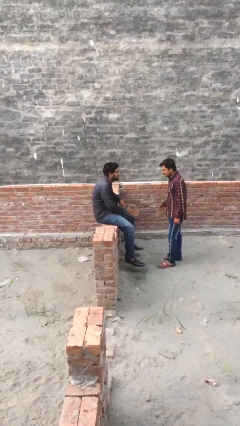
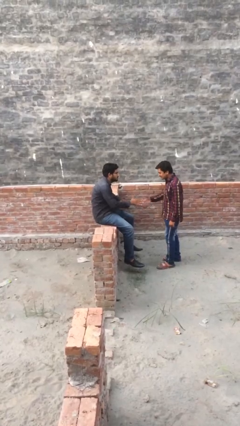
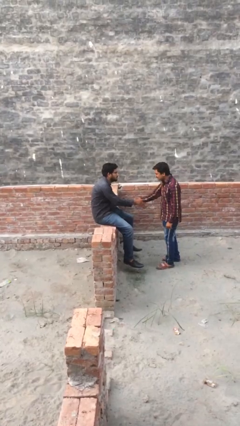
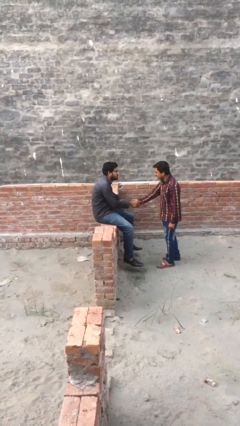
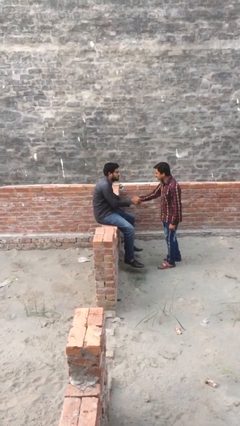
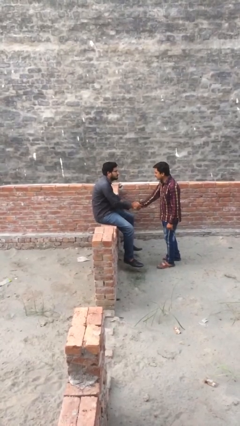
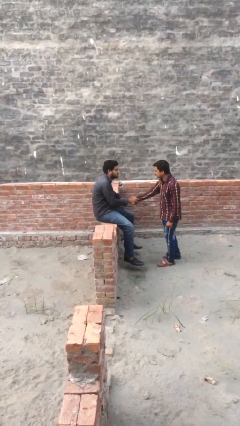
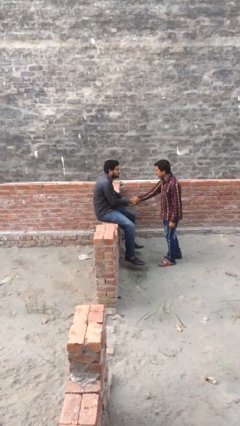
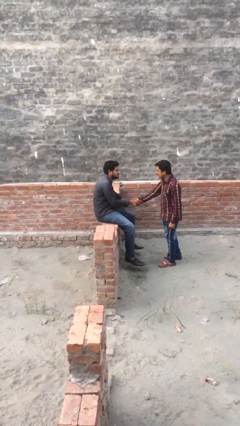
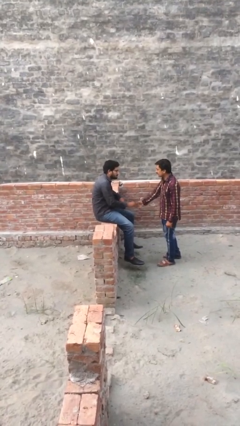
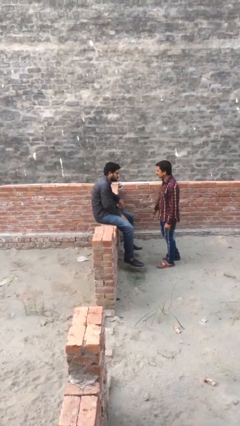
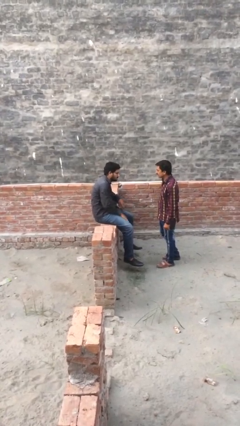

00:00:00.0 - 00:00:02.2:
person shakes hand

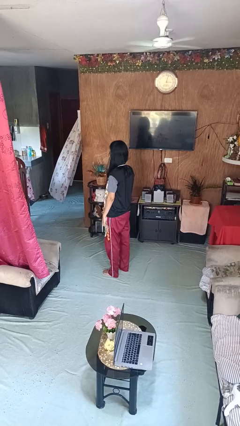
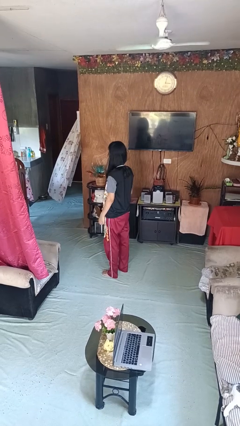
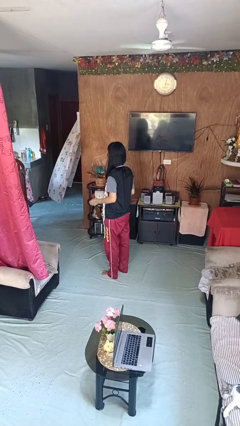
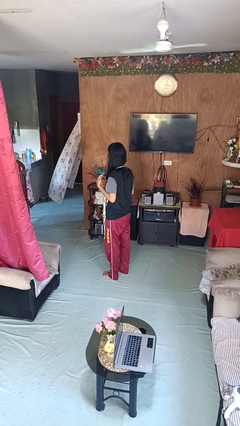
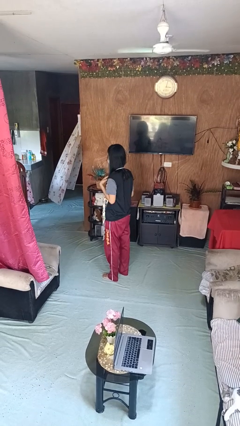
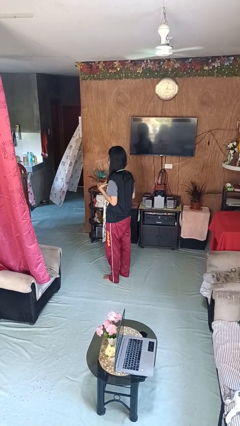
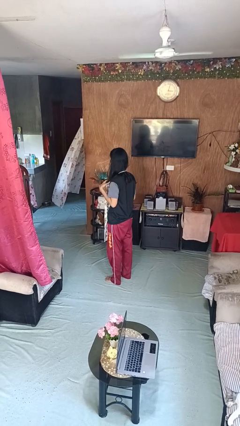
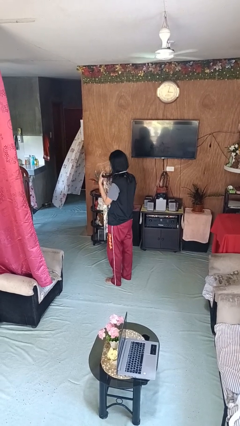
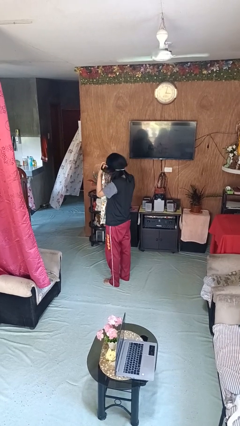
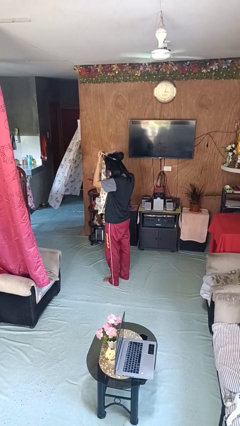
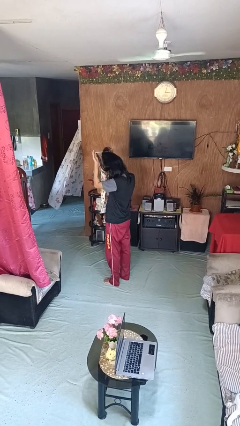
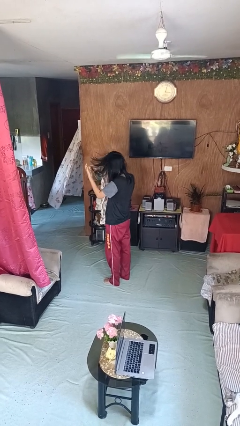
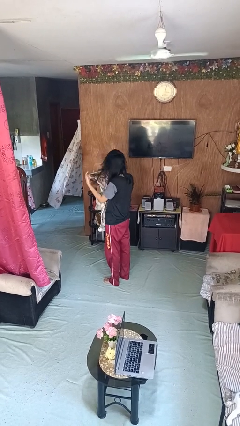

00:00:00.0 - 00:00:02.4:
person takes off apron

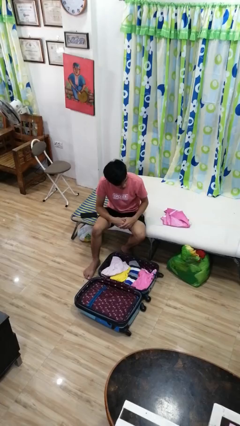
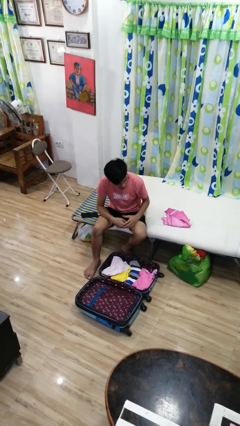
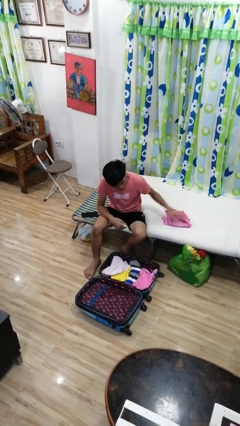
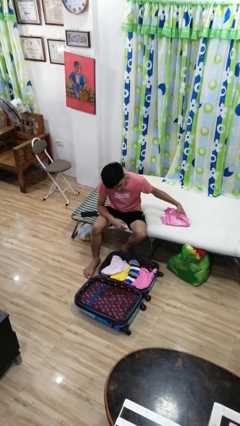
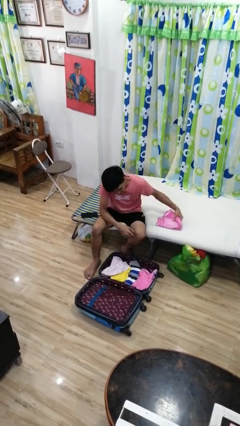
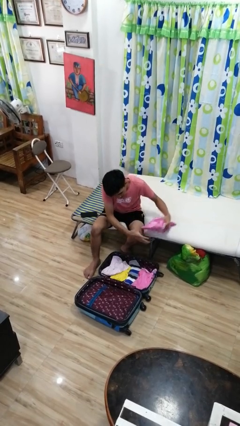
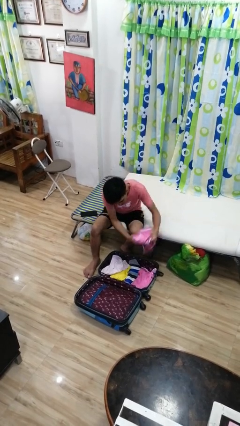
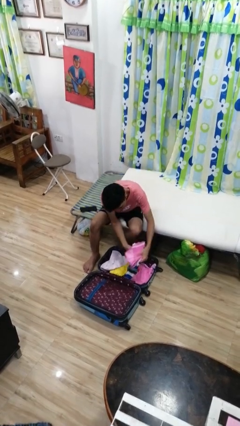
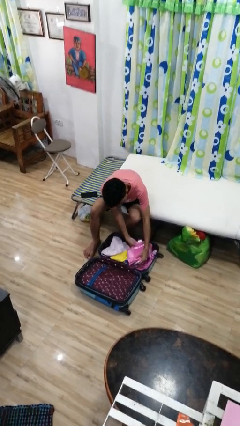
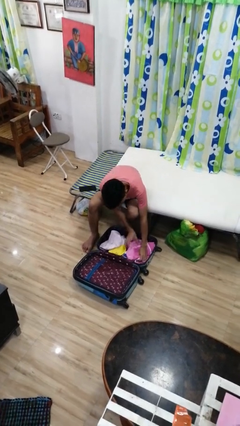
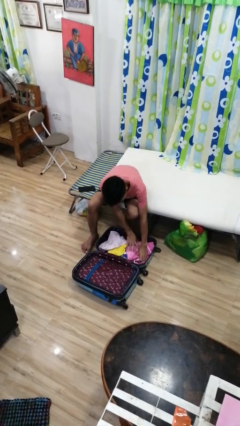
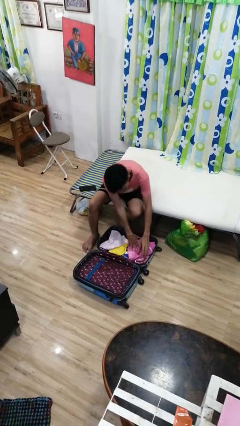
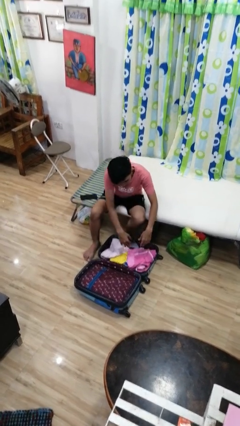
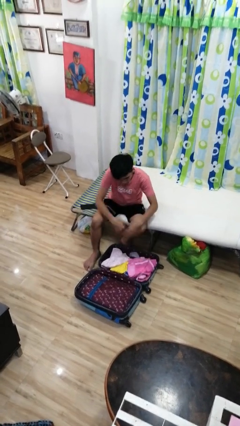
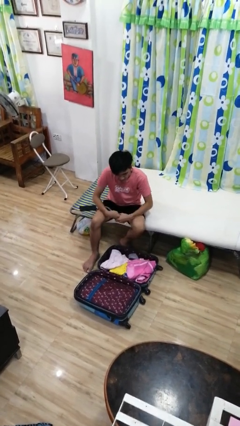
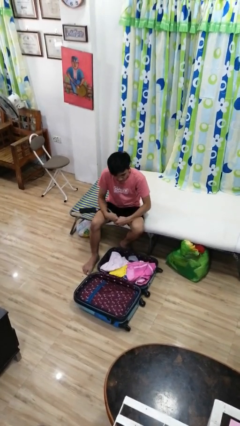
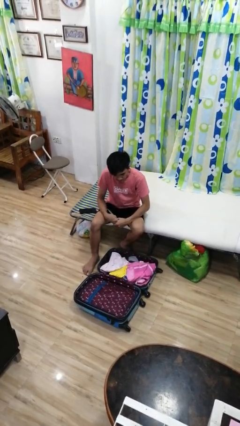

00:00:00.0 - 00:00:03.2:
person loads clothes into suitcase

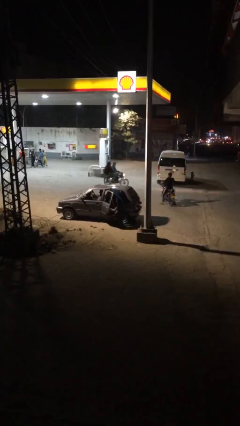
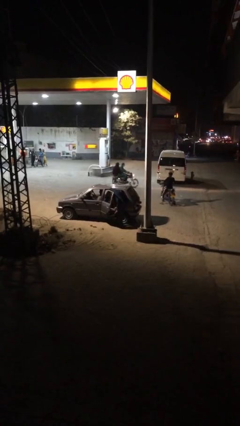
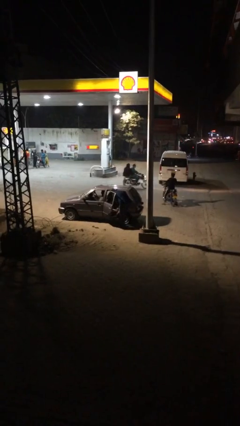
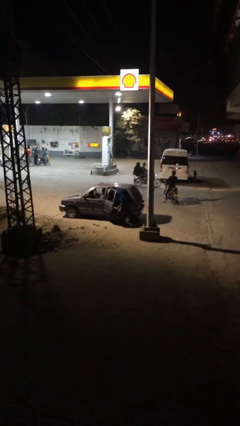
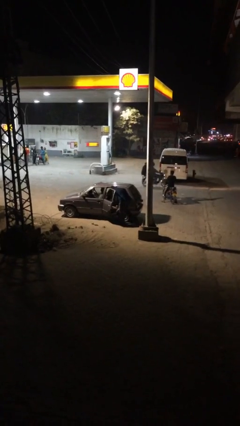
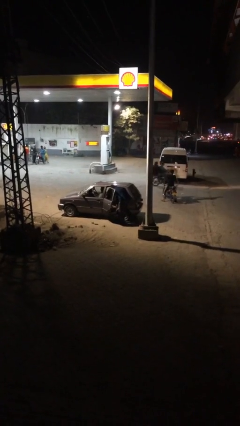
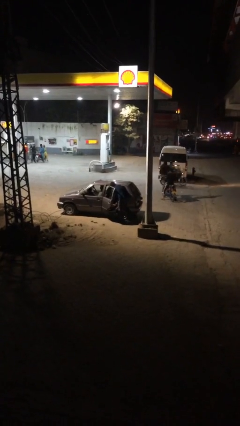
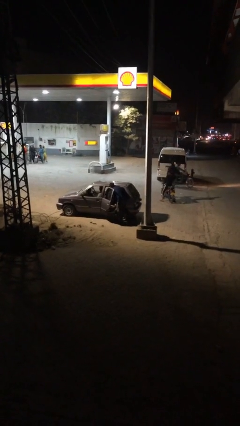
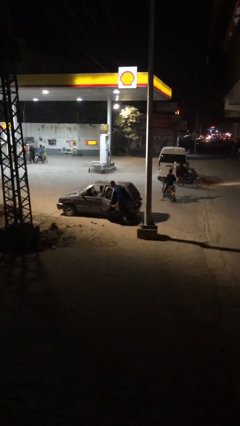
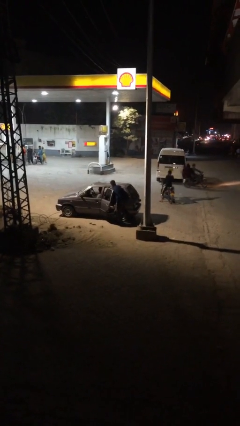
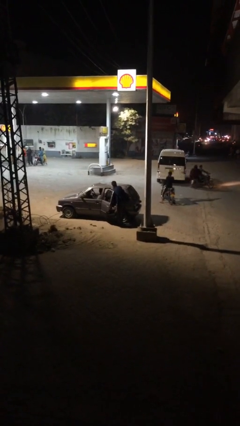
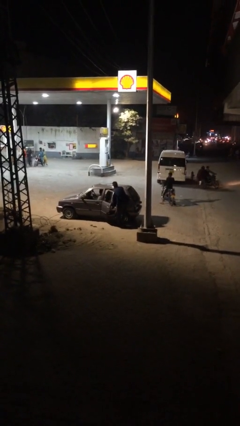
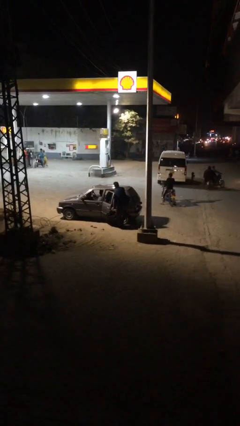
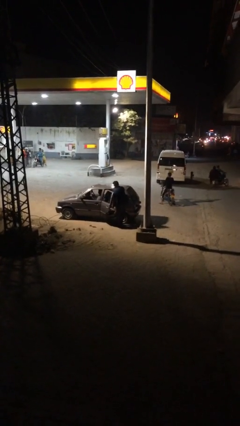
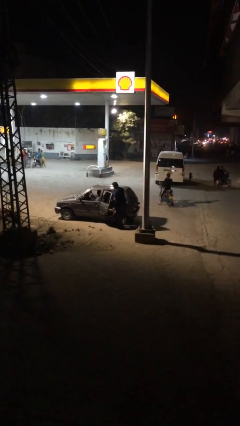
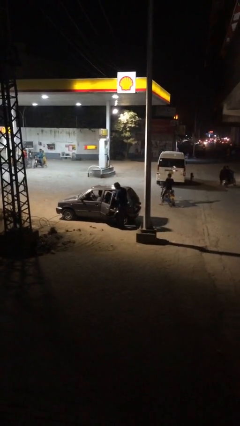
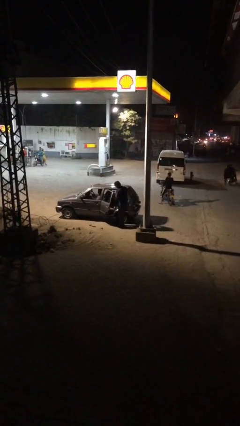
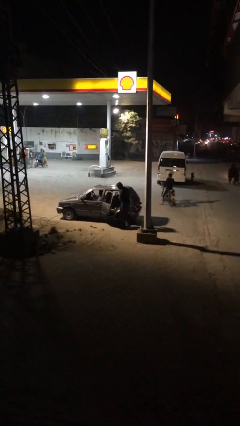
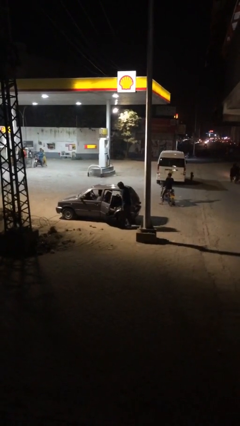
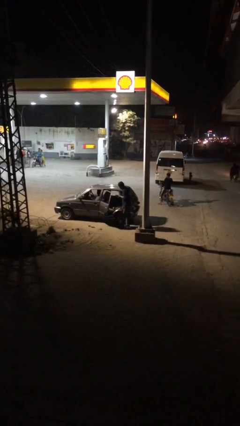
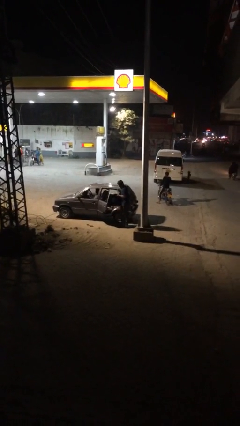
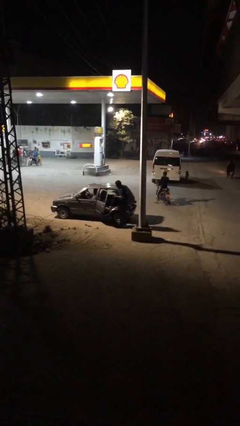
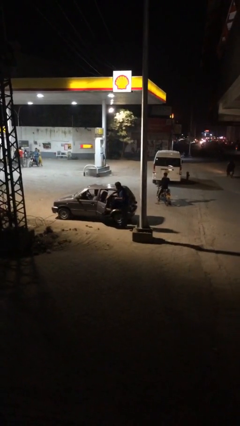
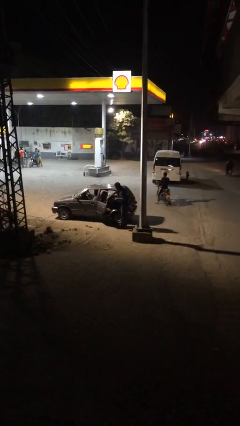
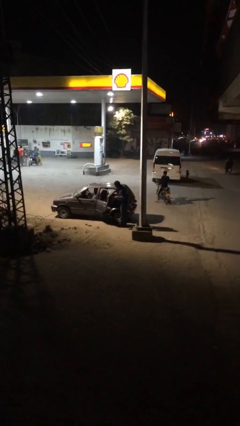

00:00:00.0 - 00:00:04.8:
person unloads car

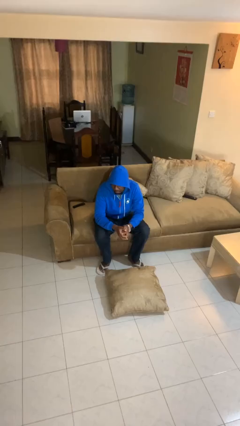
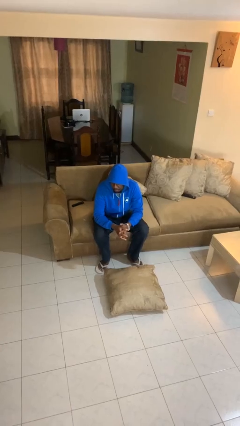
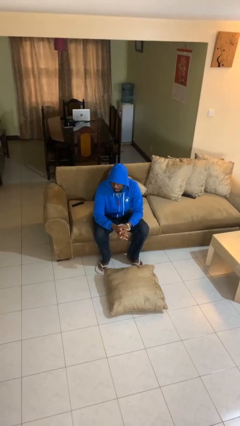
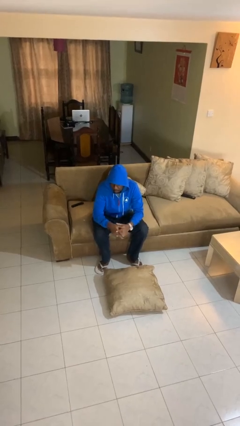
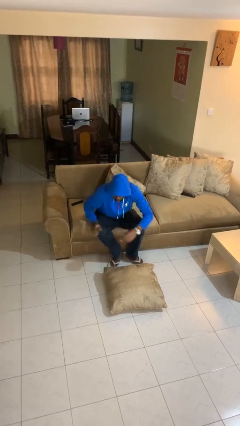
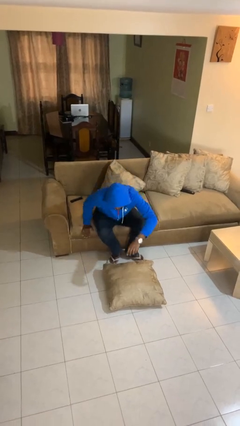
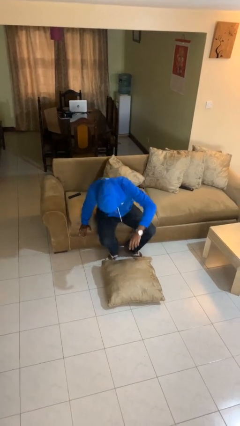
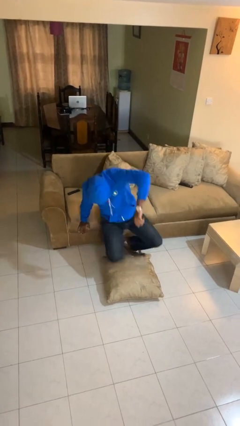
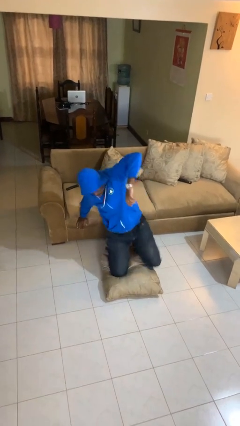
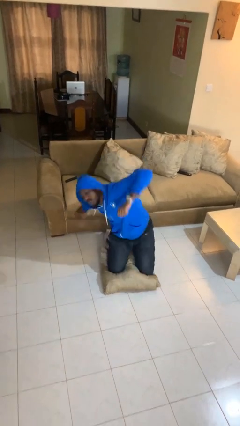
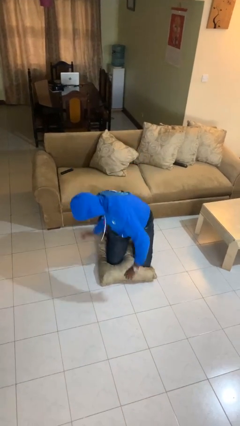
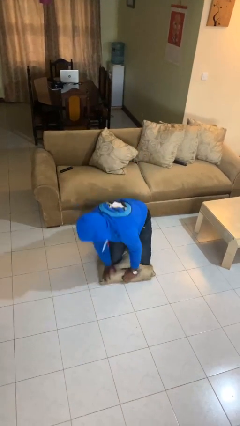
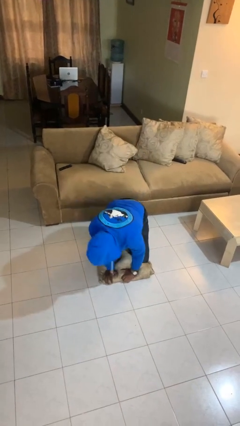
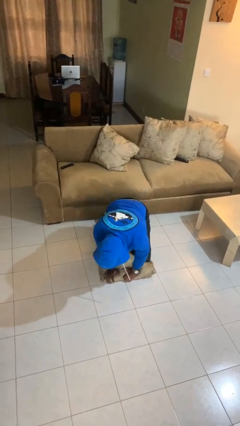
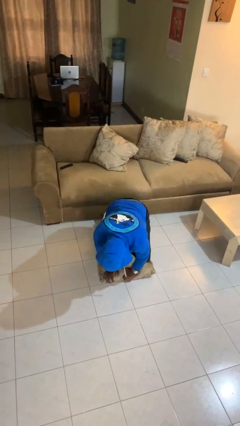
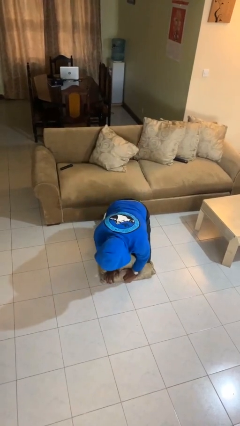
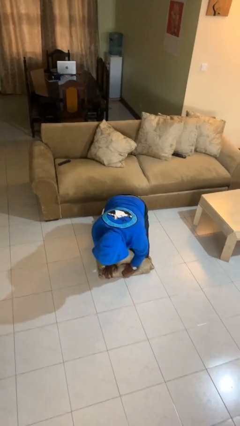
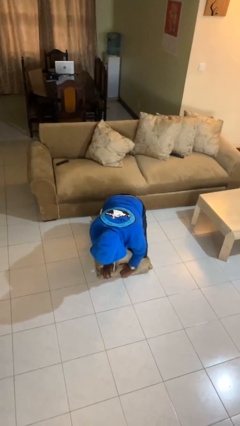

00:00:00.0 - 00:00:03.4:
person falls from chair

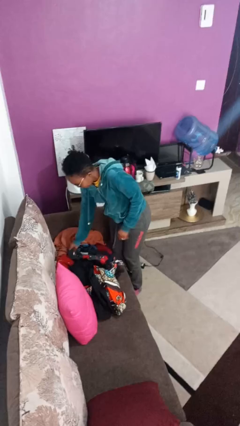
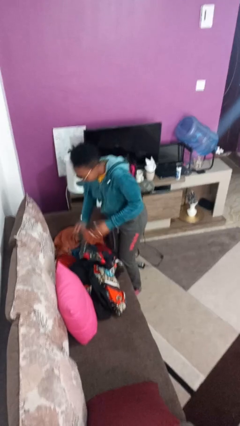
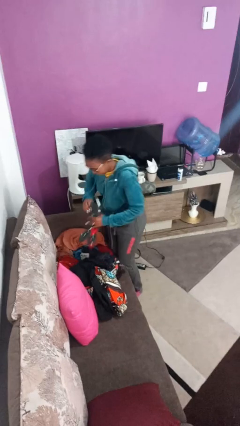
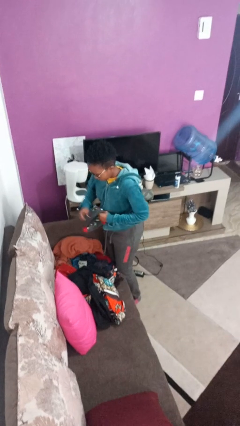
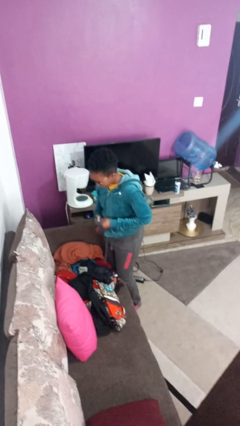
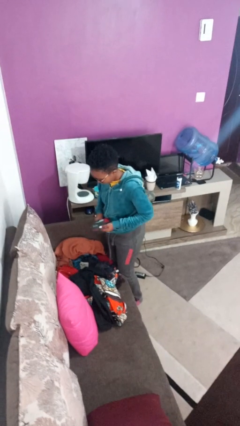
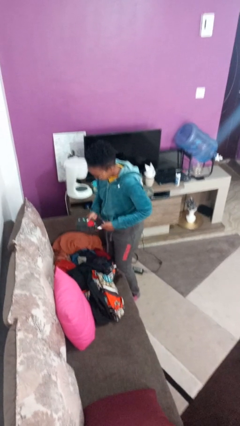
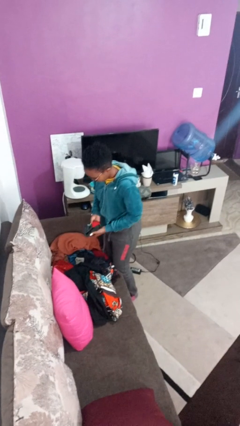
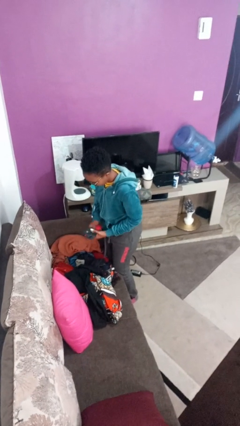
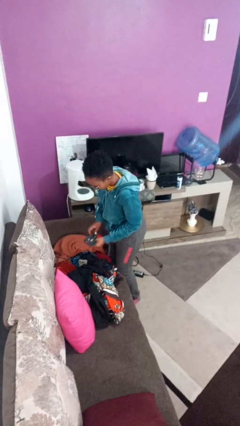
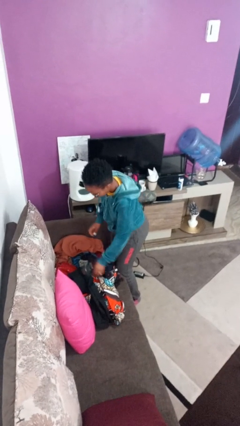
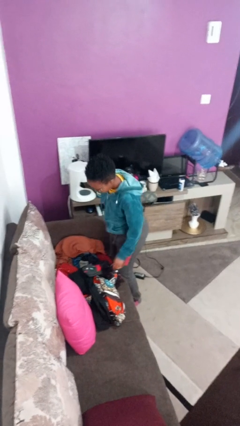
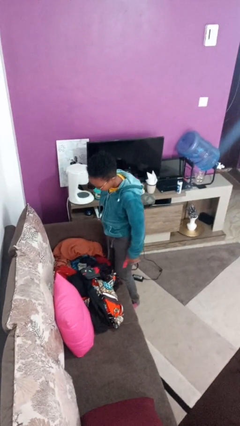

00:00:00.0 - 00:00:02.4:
person folds socks
